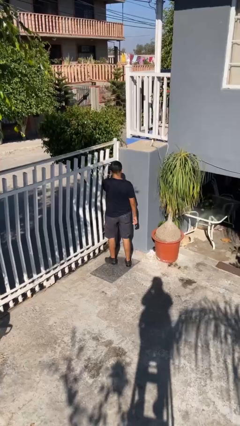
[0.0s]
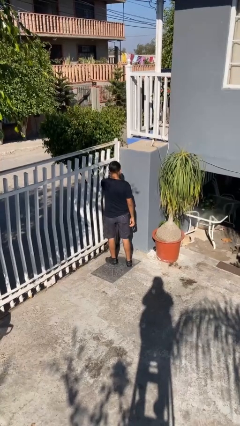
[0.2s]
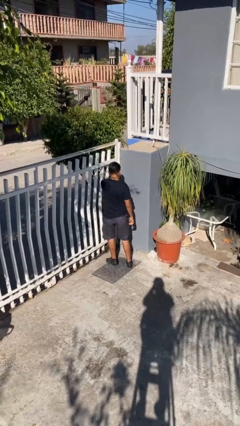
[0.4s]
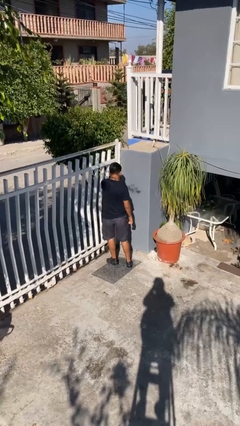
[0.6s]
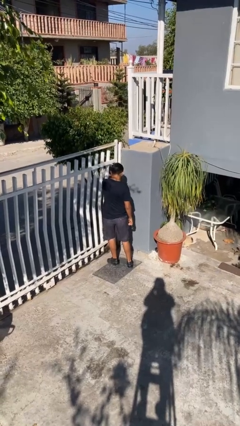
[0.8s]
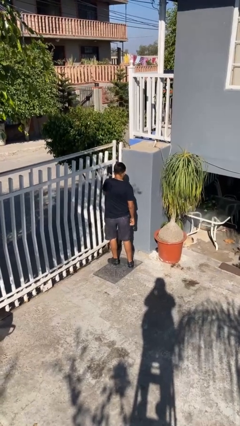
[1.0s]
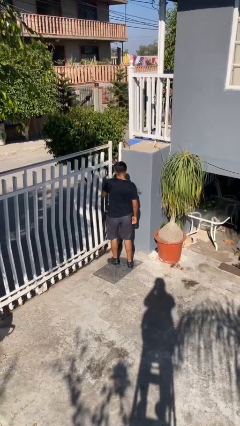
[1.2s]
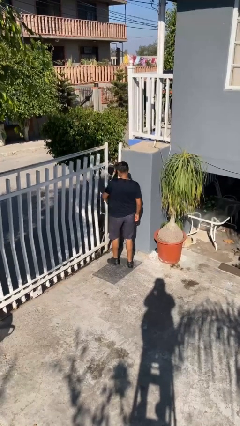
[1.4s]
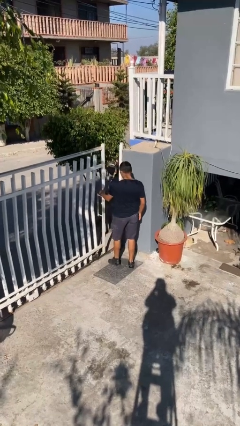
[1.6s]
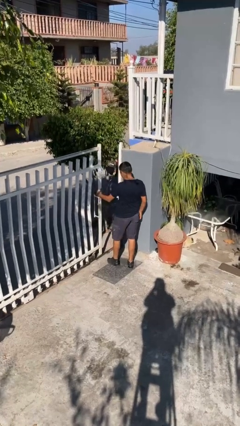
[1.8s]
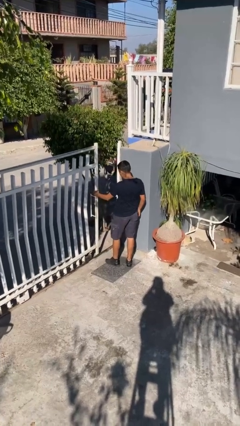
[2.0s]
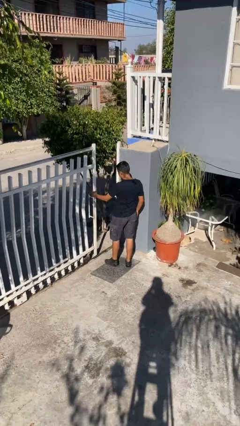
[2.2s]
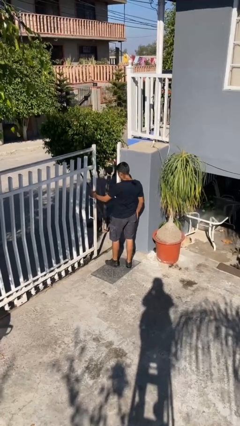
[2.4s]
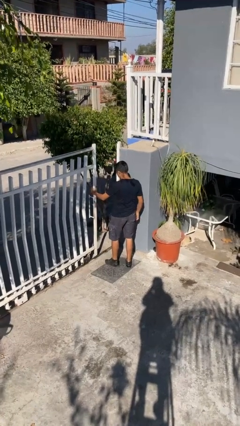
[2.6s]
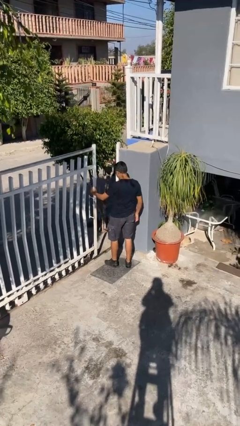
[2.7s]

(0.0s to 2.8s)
person opens facility door

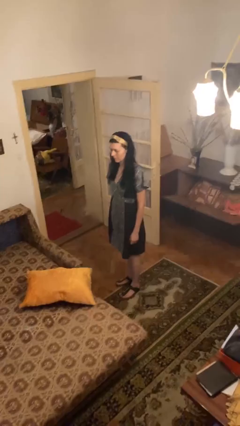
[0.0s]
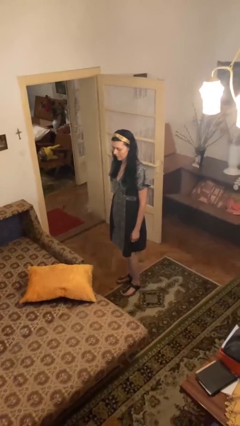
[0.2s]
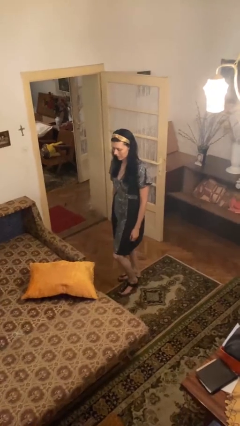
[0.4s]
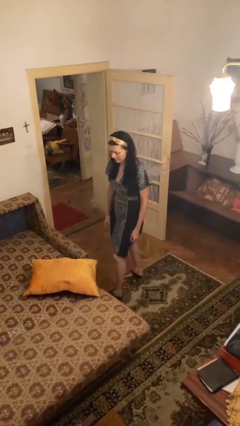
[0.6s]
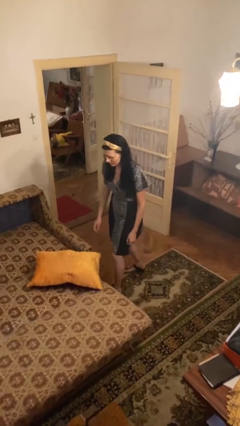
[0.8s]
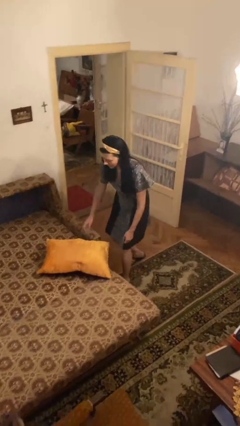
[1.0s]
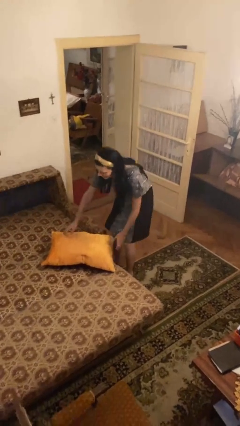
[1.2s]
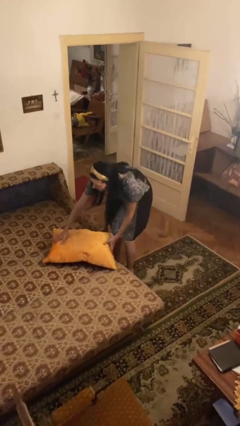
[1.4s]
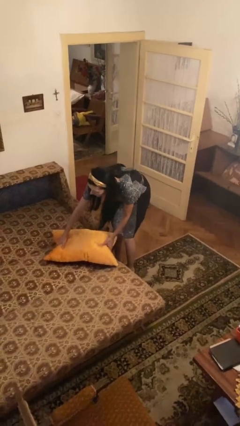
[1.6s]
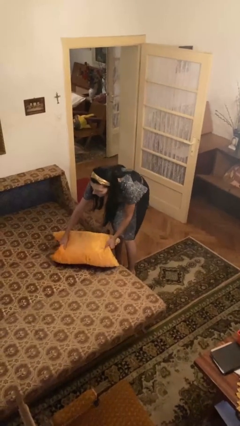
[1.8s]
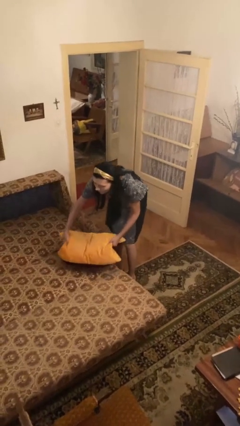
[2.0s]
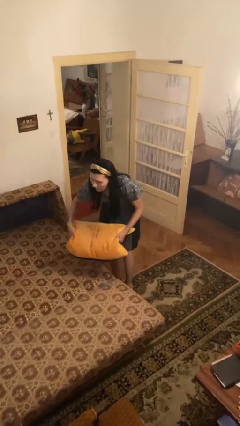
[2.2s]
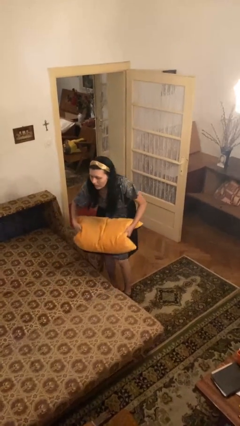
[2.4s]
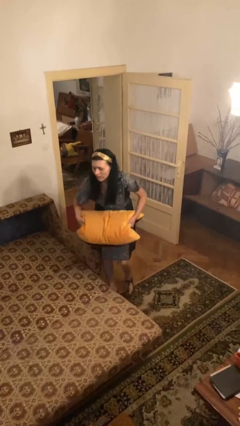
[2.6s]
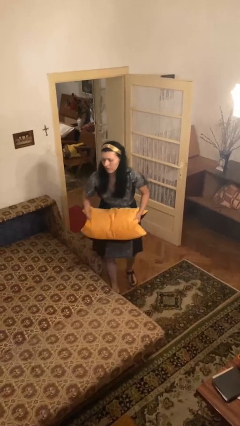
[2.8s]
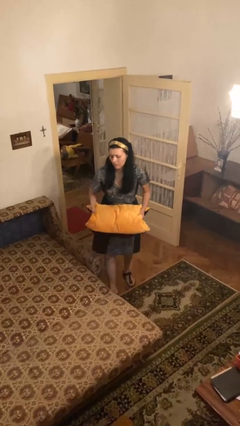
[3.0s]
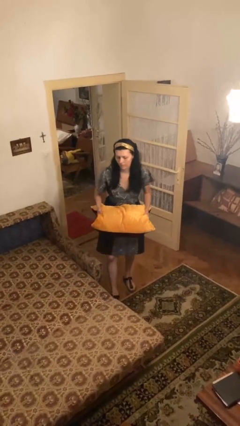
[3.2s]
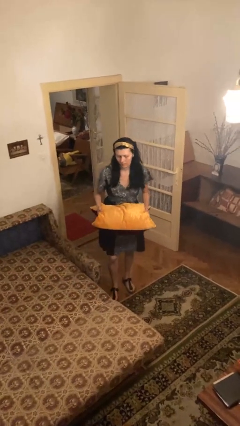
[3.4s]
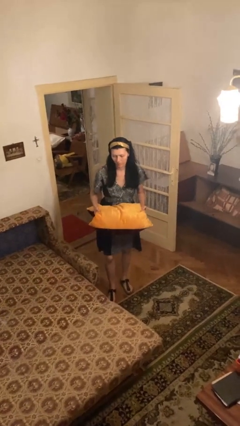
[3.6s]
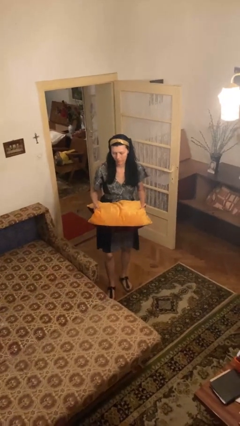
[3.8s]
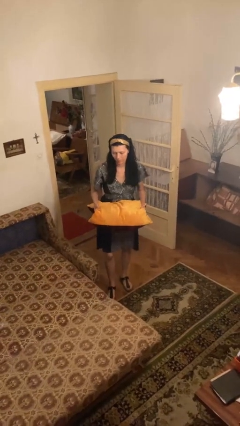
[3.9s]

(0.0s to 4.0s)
person picks up object from bed

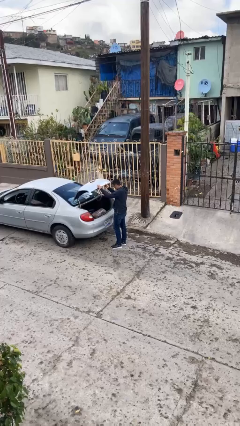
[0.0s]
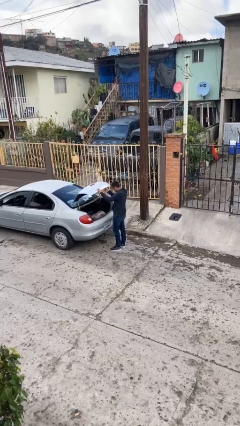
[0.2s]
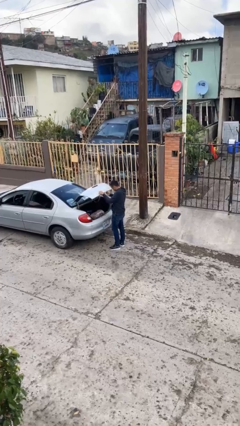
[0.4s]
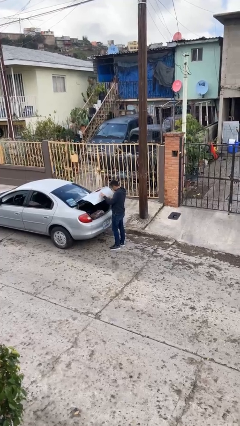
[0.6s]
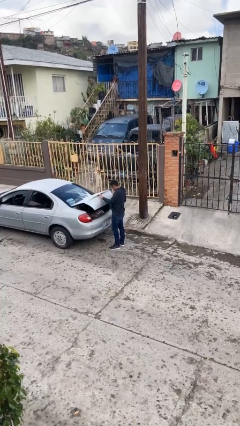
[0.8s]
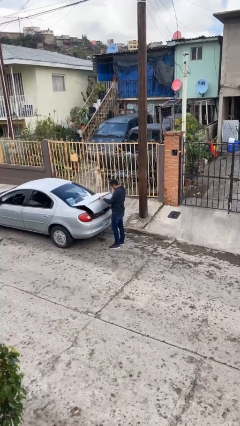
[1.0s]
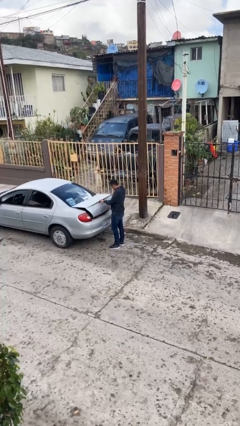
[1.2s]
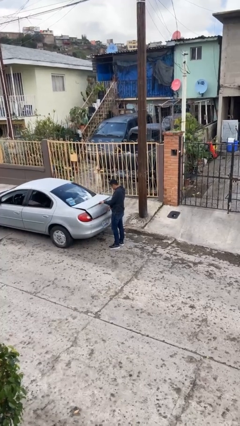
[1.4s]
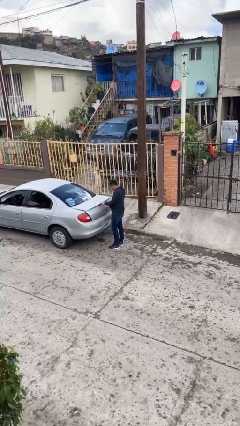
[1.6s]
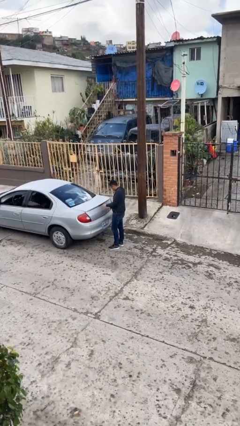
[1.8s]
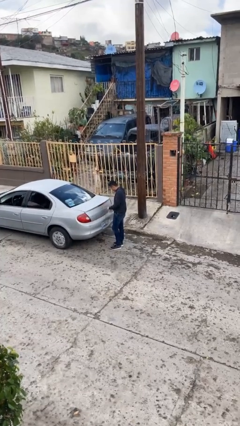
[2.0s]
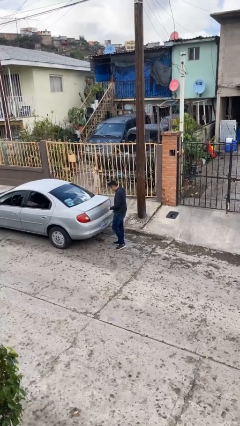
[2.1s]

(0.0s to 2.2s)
person closes car trunk

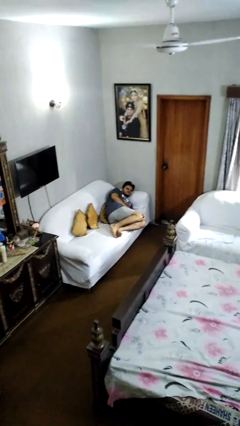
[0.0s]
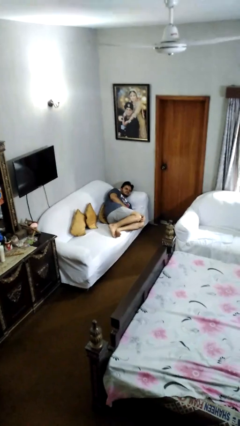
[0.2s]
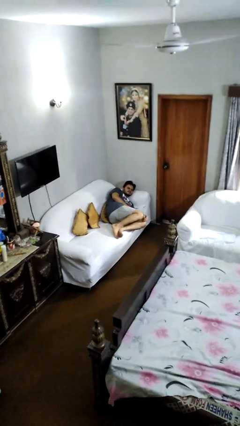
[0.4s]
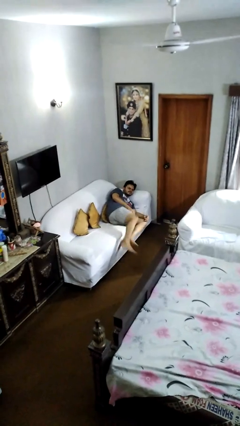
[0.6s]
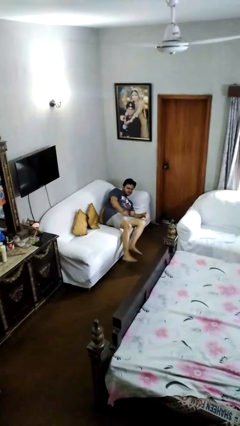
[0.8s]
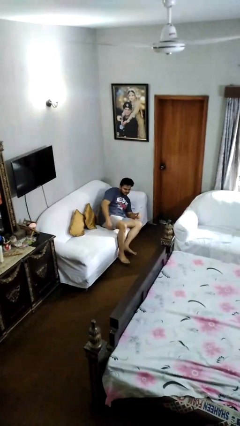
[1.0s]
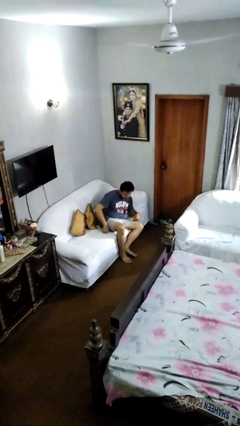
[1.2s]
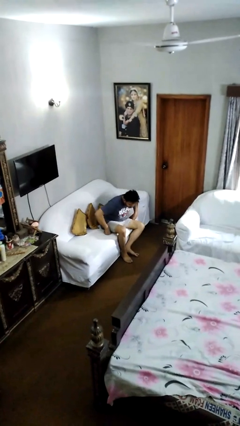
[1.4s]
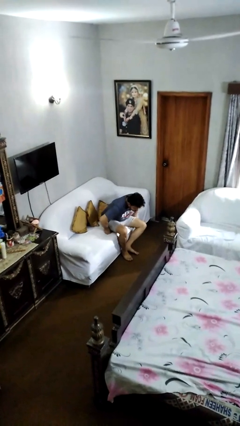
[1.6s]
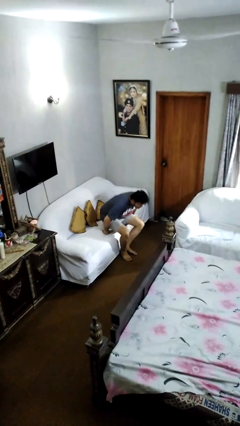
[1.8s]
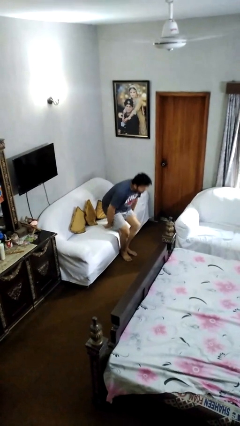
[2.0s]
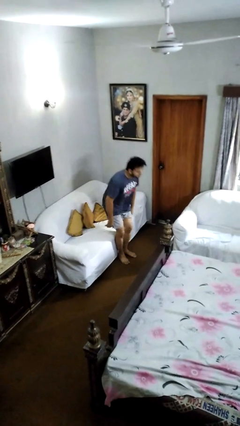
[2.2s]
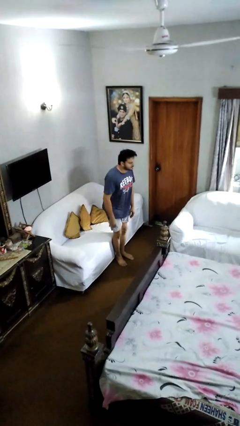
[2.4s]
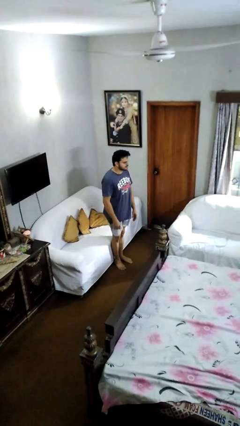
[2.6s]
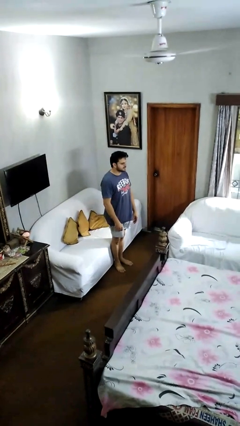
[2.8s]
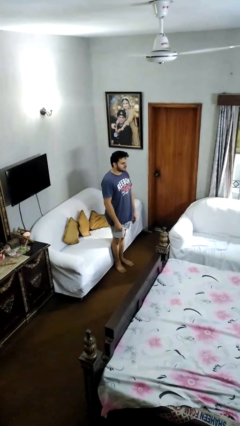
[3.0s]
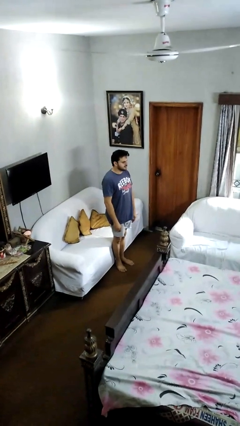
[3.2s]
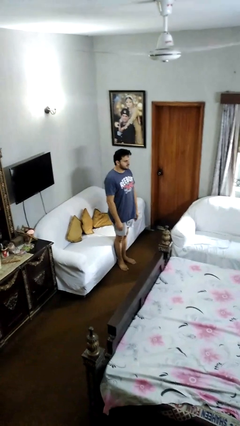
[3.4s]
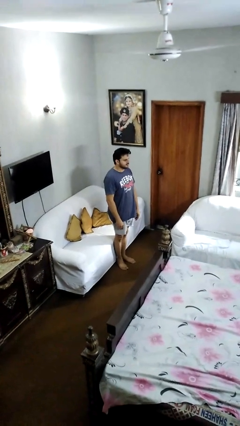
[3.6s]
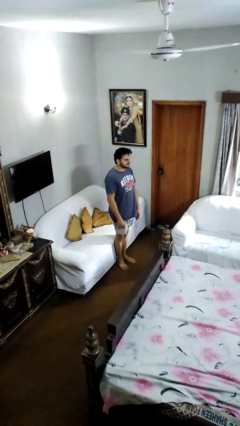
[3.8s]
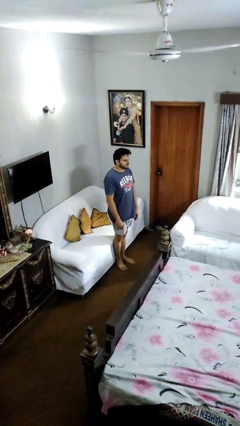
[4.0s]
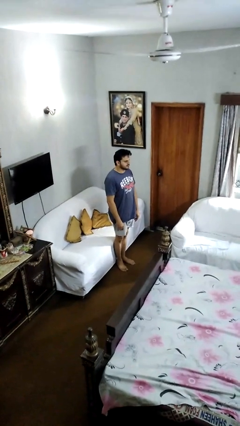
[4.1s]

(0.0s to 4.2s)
person stands up

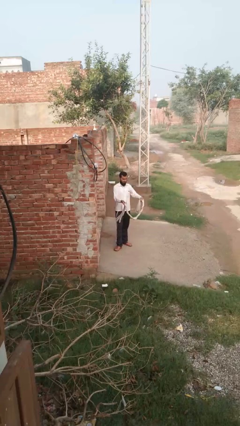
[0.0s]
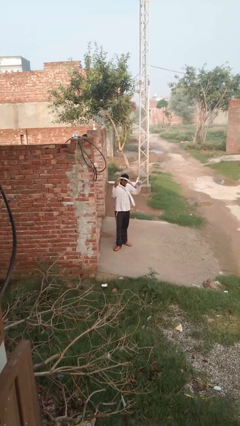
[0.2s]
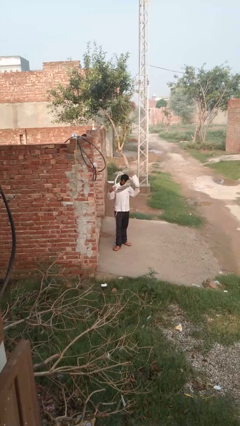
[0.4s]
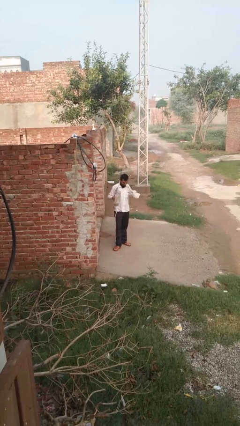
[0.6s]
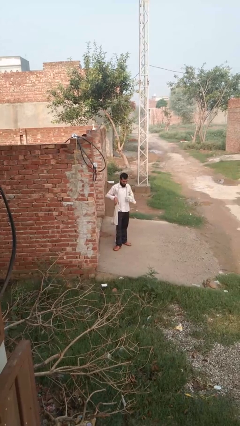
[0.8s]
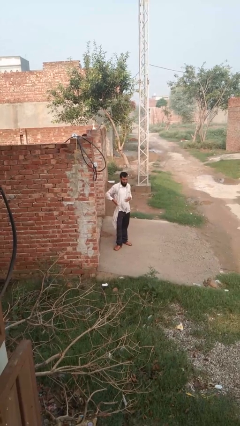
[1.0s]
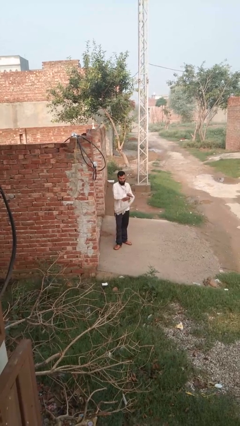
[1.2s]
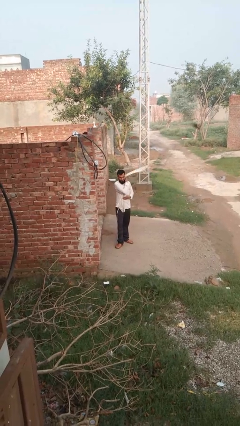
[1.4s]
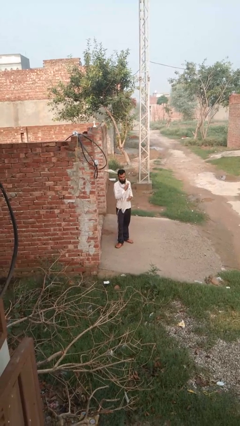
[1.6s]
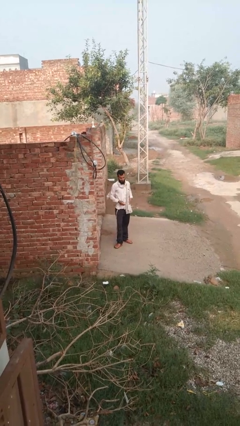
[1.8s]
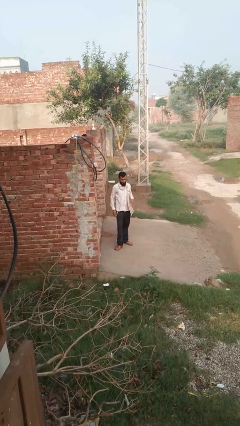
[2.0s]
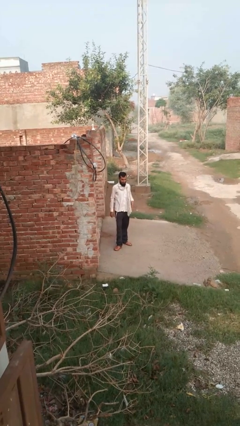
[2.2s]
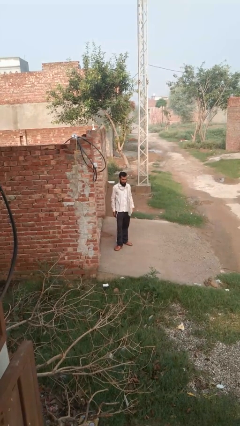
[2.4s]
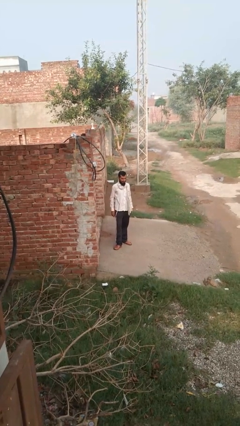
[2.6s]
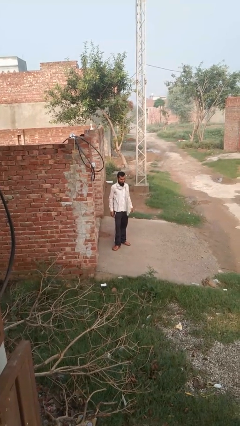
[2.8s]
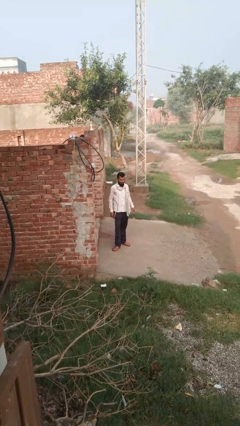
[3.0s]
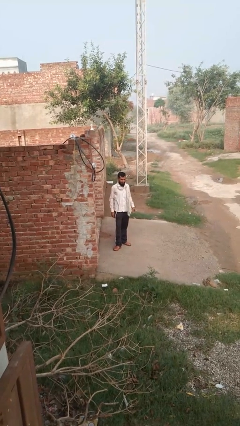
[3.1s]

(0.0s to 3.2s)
person puts on scarf

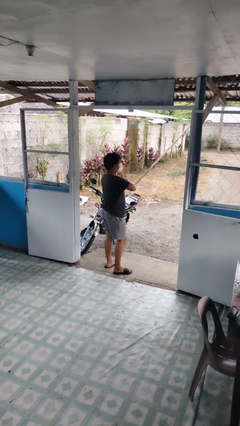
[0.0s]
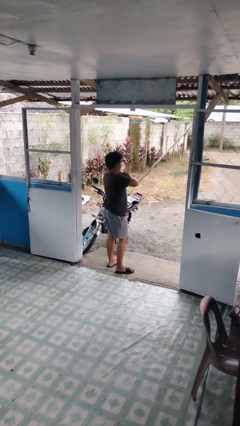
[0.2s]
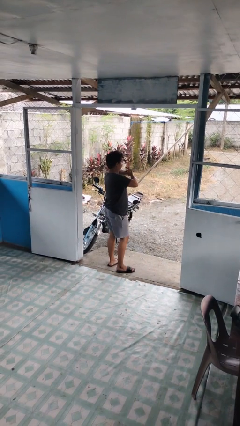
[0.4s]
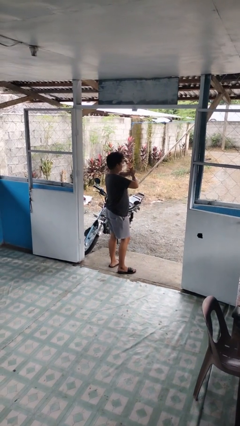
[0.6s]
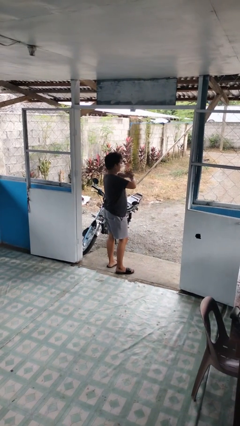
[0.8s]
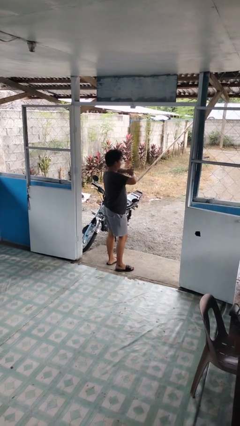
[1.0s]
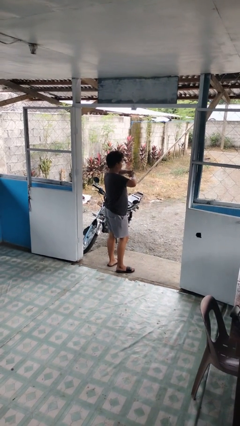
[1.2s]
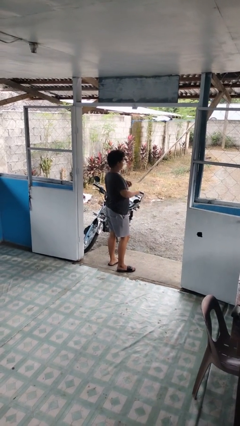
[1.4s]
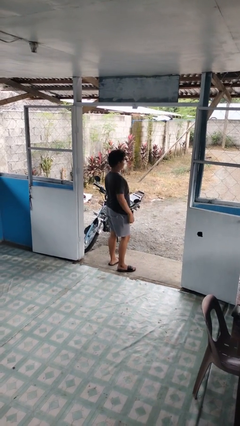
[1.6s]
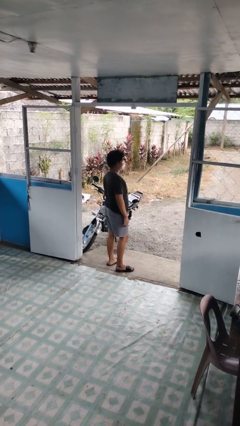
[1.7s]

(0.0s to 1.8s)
person cracks knuckles
